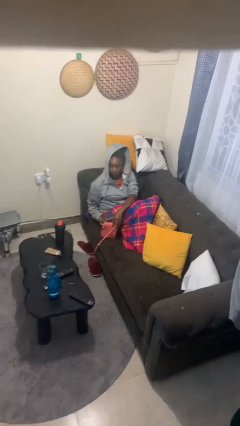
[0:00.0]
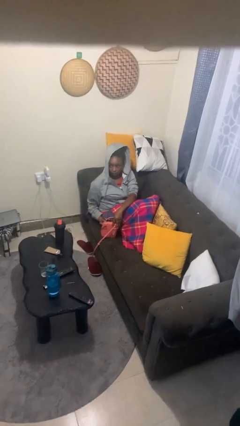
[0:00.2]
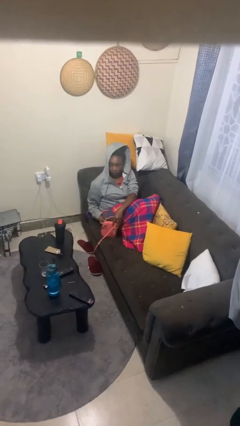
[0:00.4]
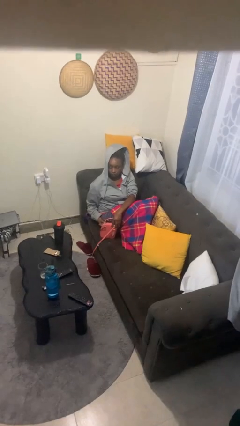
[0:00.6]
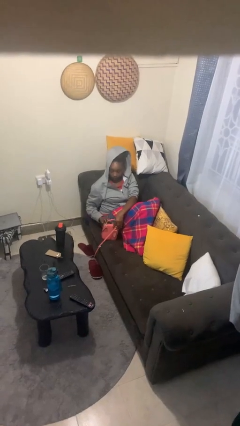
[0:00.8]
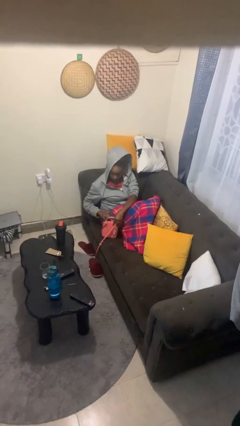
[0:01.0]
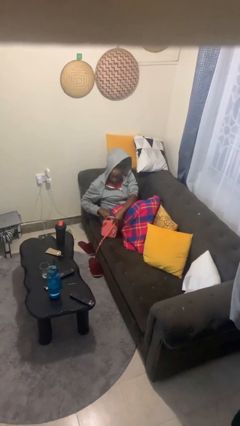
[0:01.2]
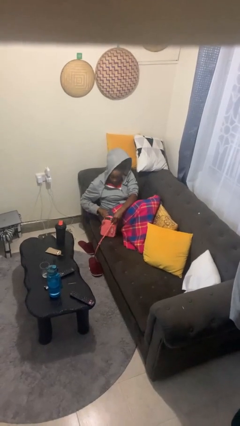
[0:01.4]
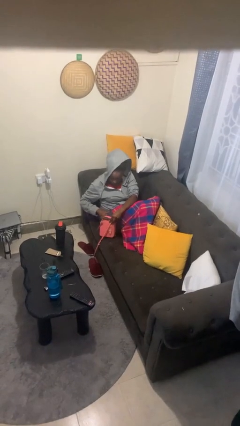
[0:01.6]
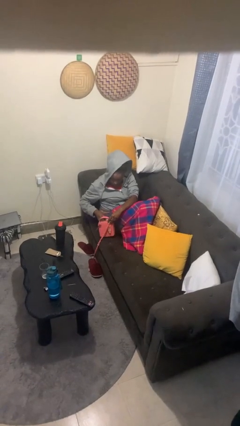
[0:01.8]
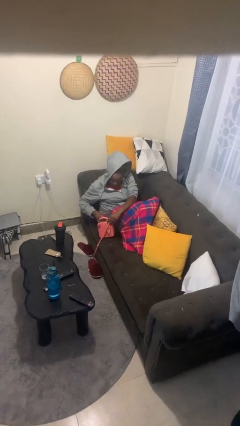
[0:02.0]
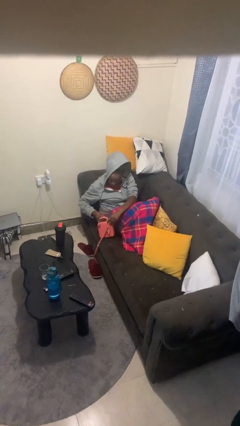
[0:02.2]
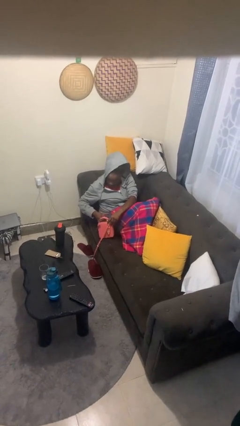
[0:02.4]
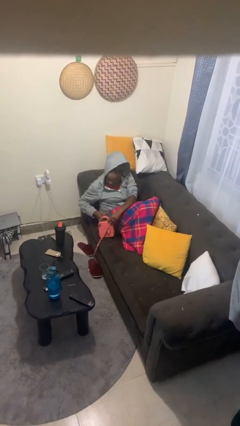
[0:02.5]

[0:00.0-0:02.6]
person searches in purse

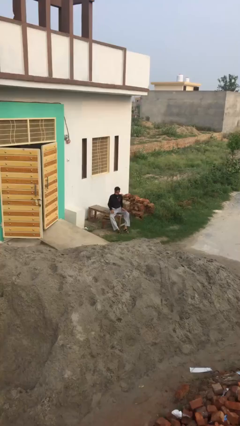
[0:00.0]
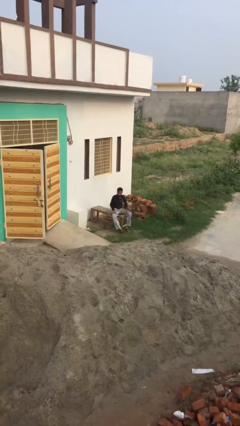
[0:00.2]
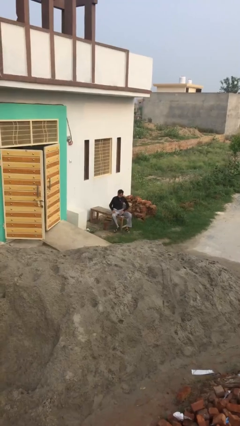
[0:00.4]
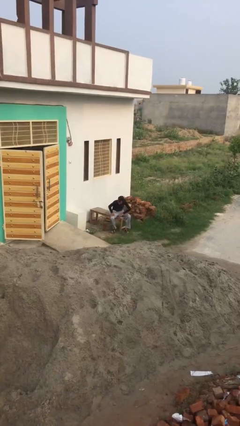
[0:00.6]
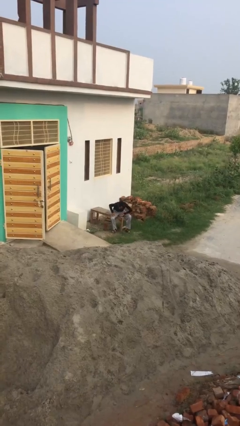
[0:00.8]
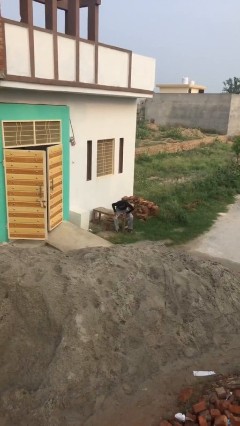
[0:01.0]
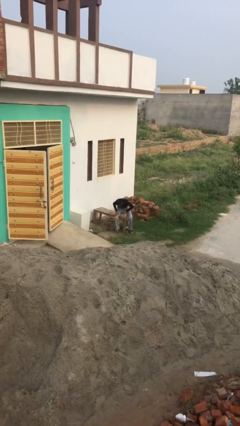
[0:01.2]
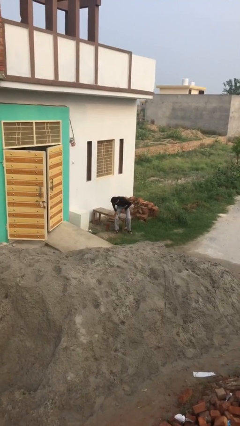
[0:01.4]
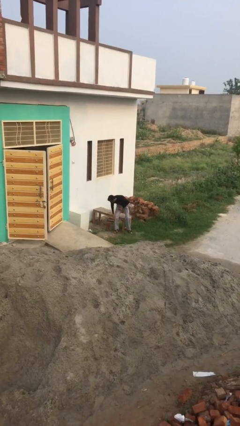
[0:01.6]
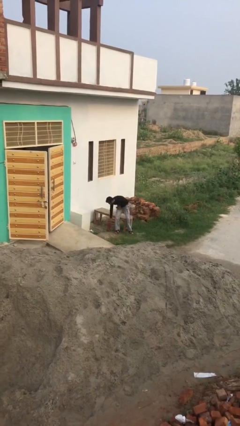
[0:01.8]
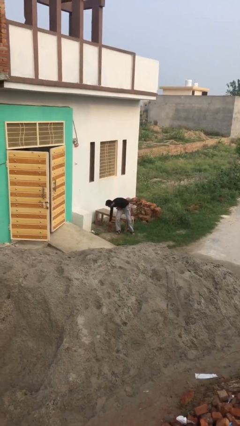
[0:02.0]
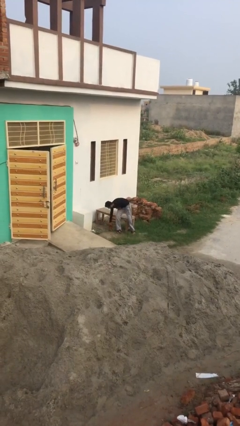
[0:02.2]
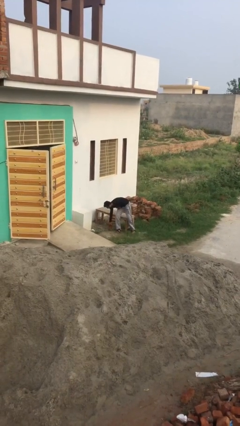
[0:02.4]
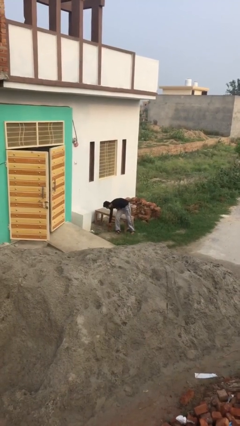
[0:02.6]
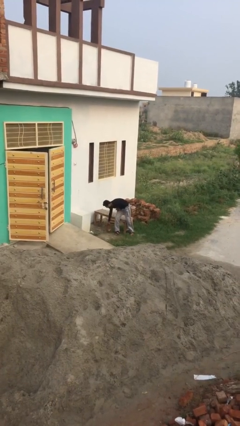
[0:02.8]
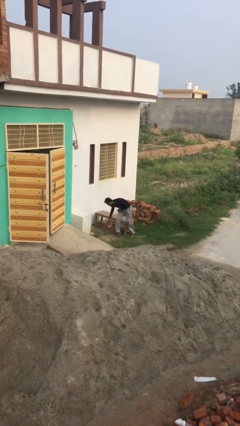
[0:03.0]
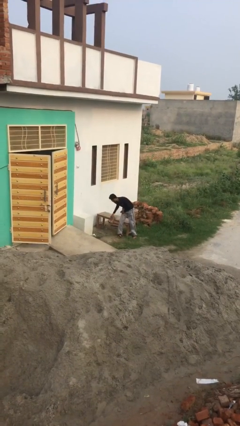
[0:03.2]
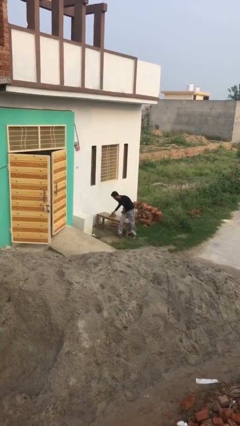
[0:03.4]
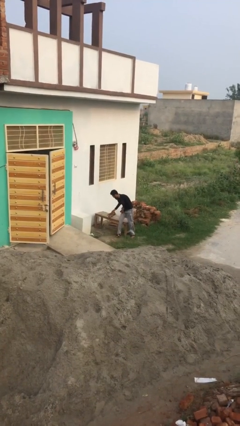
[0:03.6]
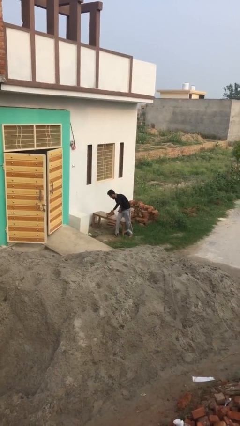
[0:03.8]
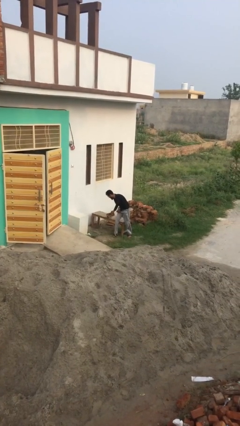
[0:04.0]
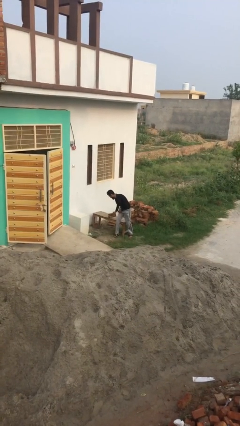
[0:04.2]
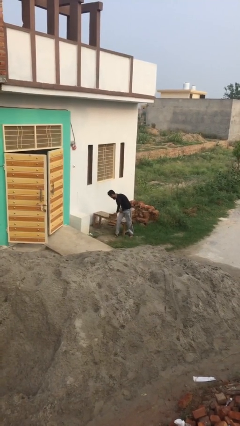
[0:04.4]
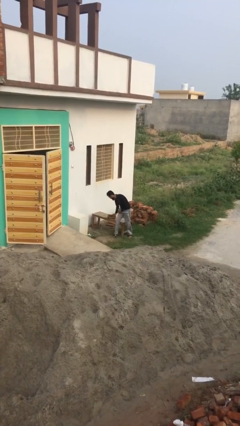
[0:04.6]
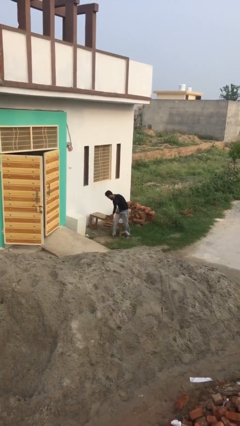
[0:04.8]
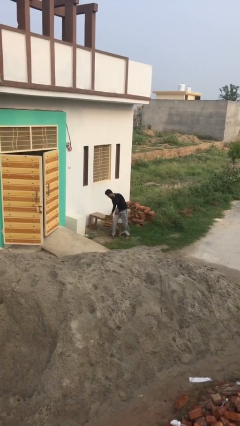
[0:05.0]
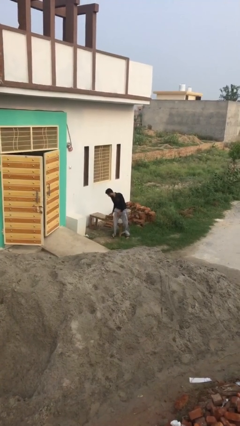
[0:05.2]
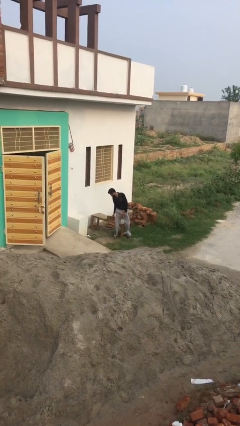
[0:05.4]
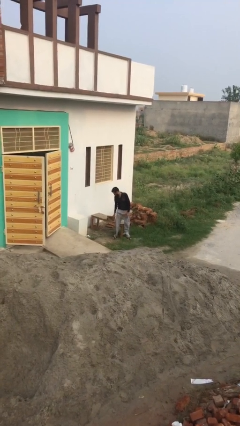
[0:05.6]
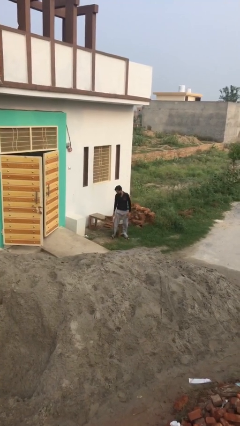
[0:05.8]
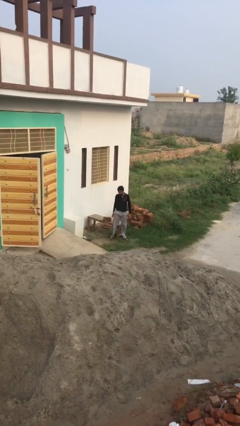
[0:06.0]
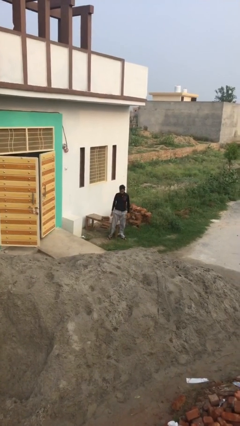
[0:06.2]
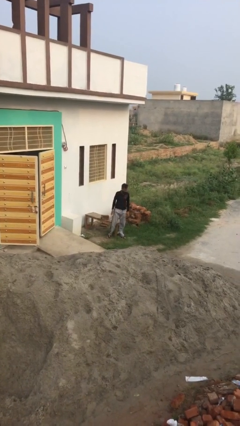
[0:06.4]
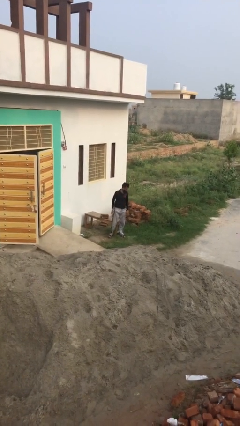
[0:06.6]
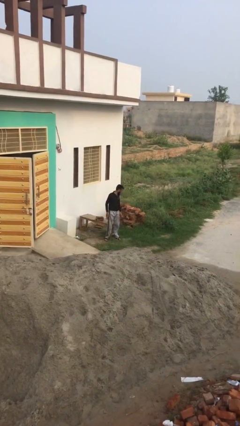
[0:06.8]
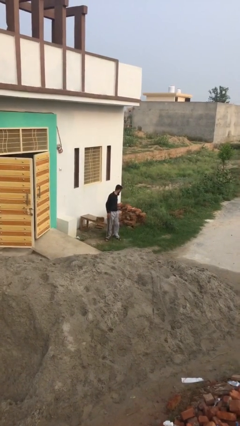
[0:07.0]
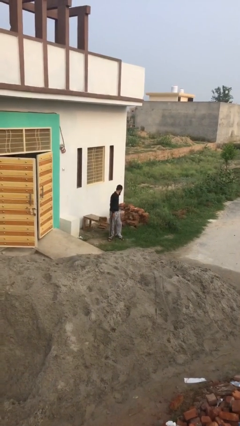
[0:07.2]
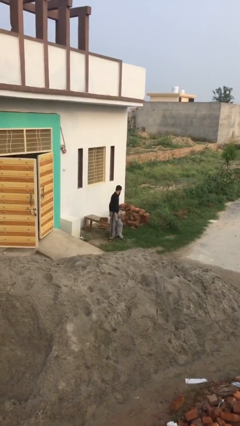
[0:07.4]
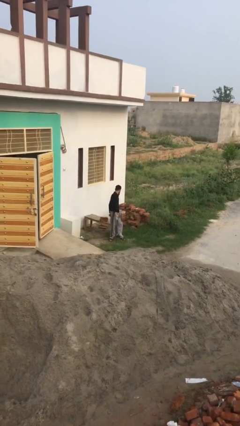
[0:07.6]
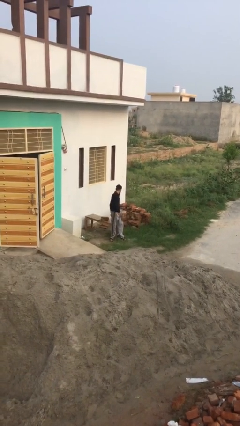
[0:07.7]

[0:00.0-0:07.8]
person puts down object on table

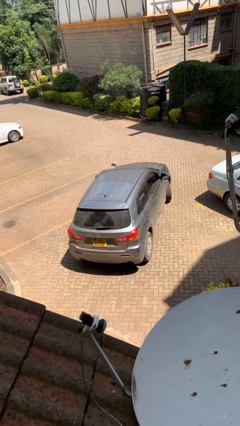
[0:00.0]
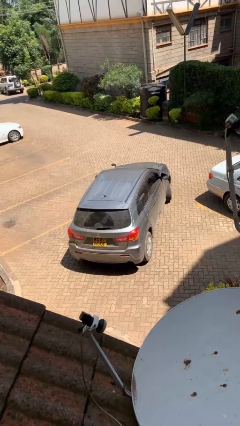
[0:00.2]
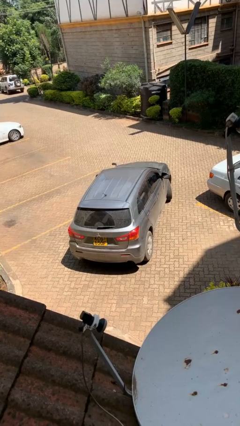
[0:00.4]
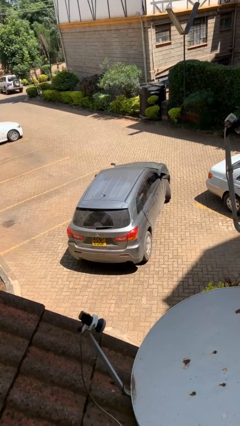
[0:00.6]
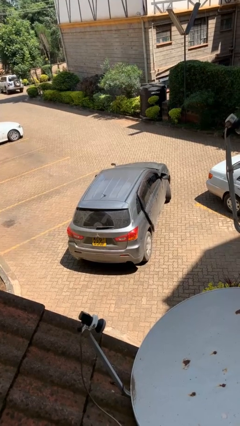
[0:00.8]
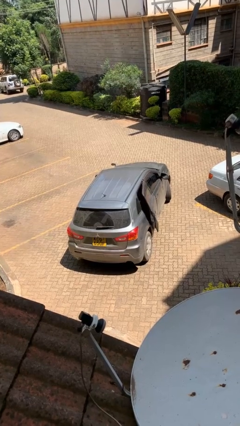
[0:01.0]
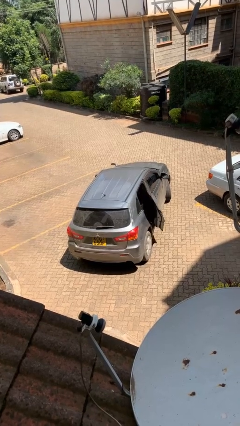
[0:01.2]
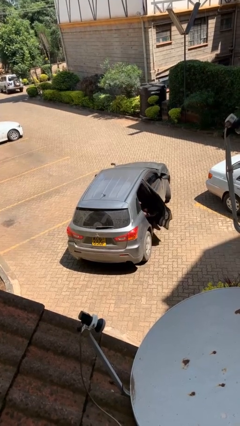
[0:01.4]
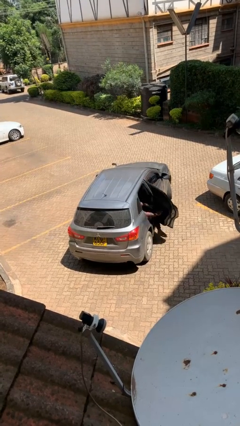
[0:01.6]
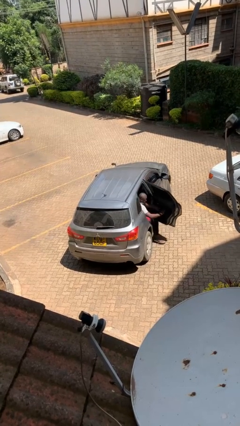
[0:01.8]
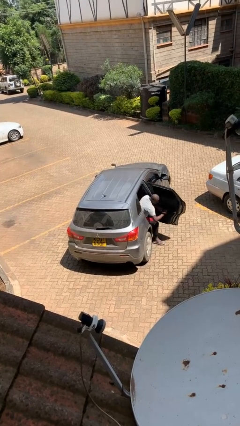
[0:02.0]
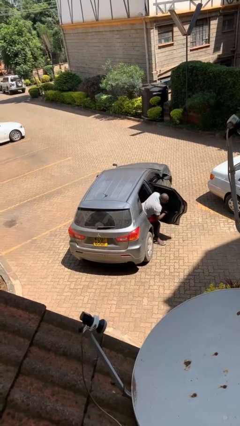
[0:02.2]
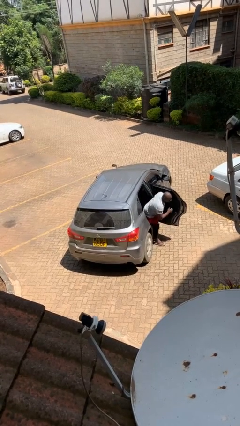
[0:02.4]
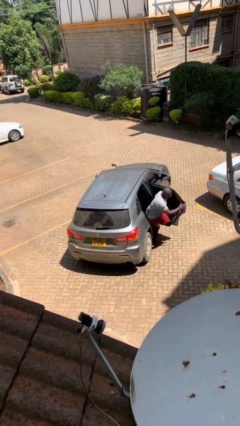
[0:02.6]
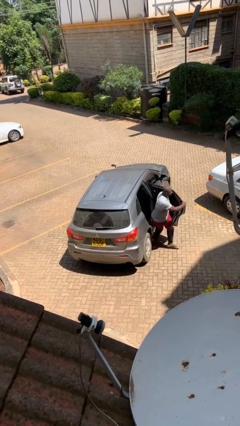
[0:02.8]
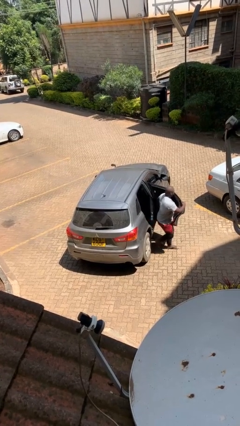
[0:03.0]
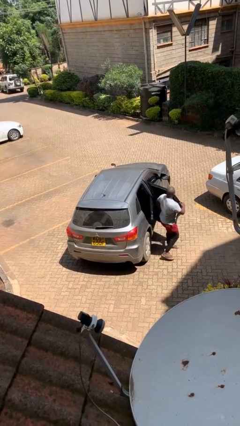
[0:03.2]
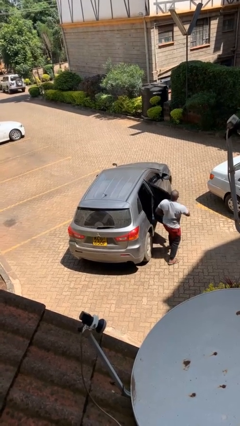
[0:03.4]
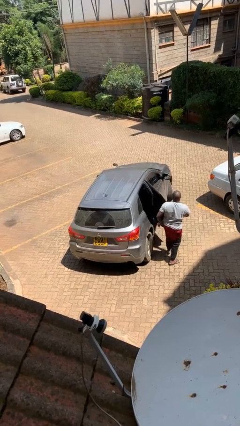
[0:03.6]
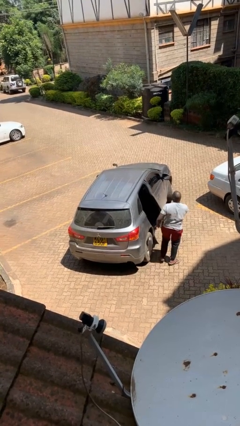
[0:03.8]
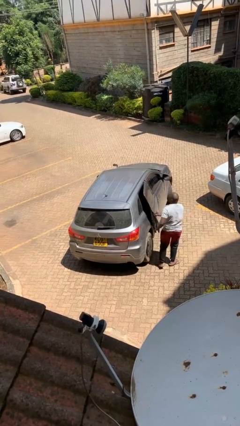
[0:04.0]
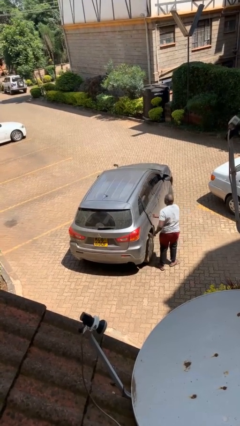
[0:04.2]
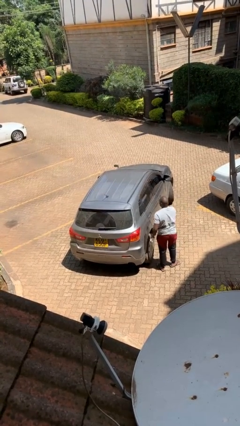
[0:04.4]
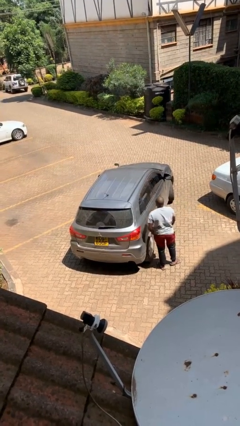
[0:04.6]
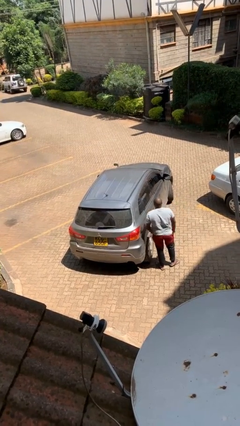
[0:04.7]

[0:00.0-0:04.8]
car drops off person

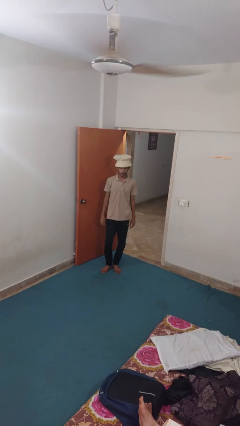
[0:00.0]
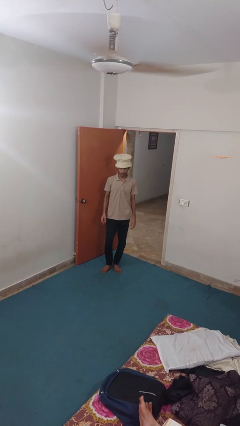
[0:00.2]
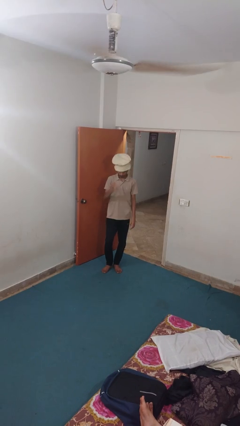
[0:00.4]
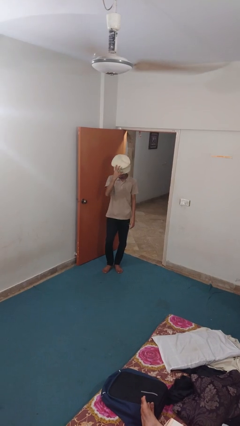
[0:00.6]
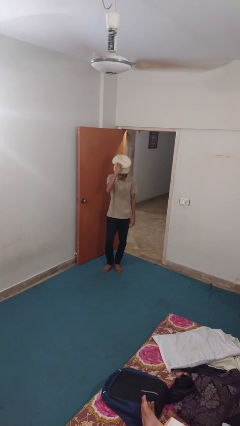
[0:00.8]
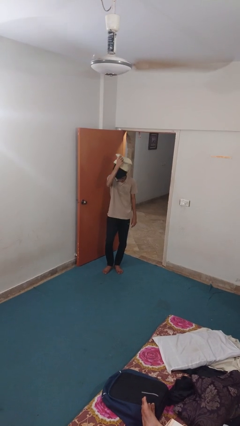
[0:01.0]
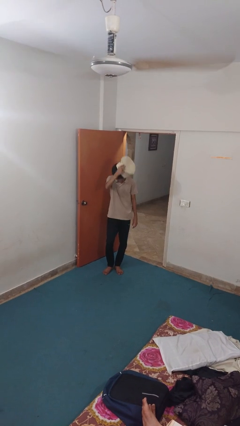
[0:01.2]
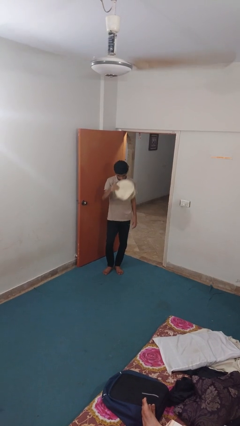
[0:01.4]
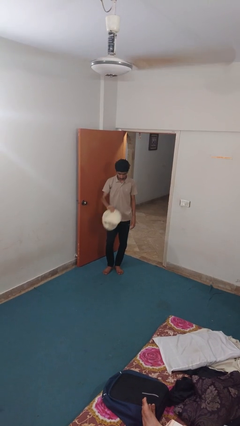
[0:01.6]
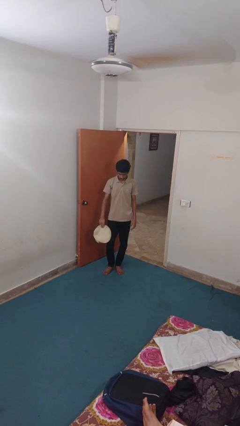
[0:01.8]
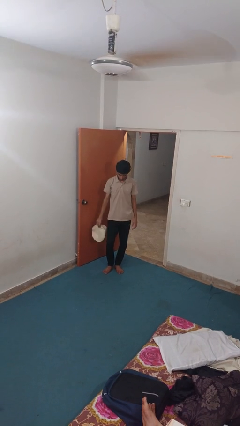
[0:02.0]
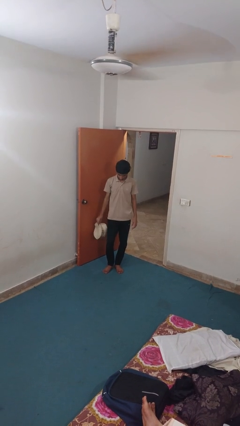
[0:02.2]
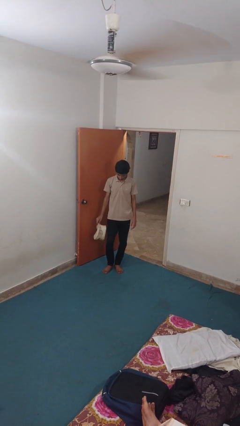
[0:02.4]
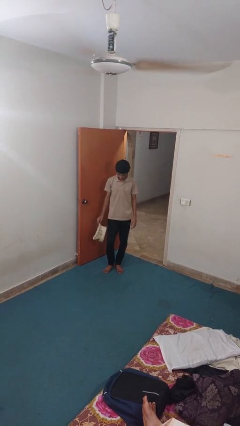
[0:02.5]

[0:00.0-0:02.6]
person takes off hat

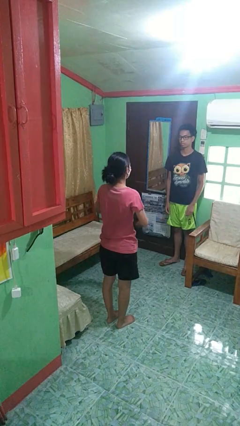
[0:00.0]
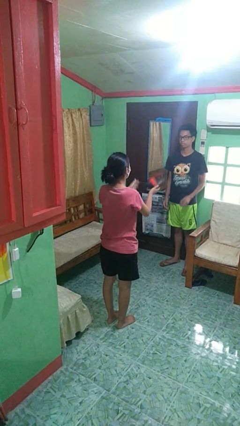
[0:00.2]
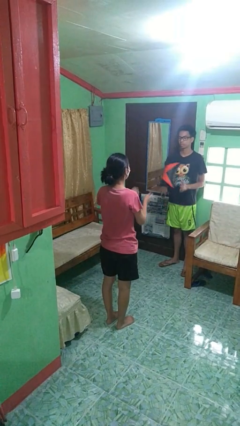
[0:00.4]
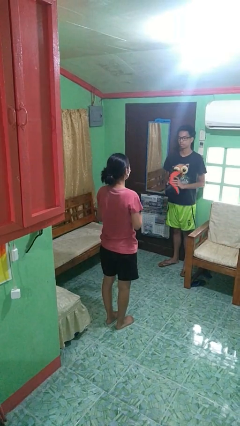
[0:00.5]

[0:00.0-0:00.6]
person throws object to person
